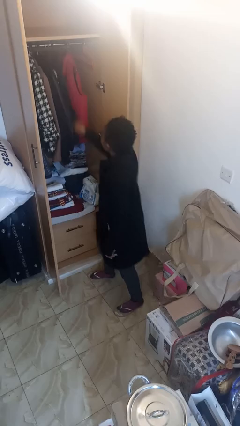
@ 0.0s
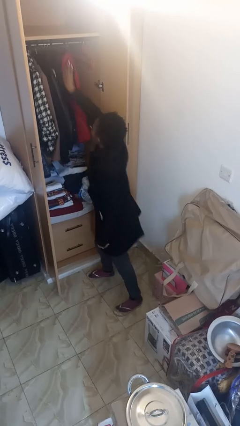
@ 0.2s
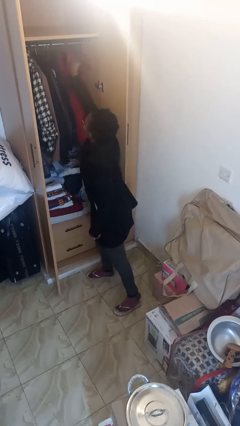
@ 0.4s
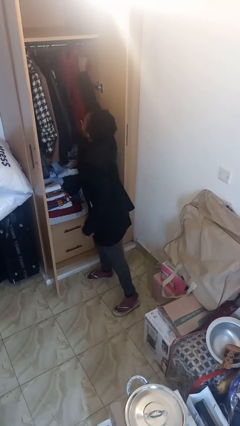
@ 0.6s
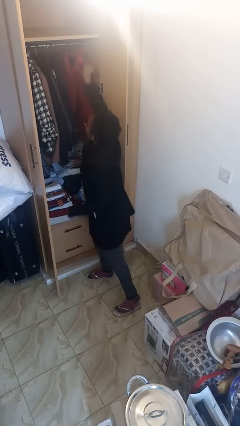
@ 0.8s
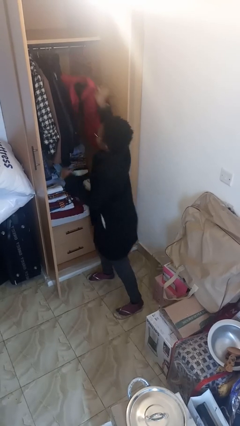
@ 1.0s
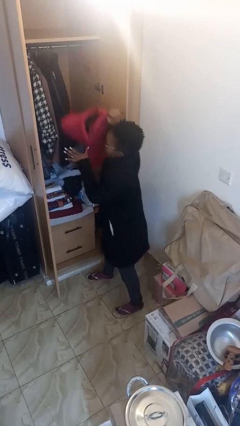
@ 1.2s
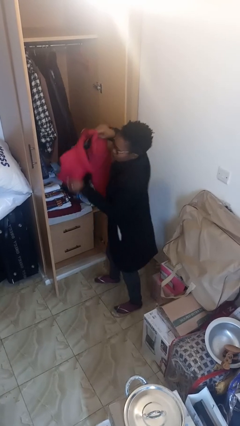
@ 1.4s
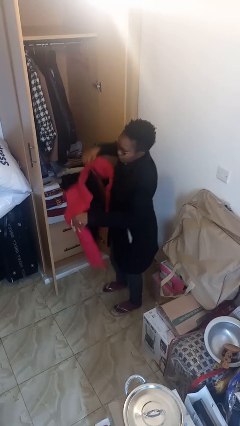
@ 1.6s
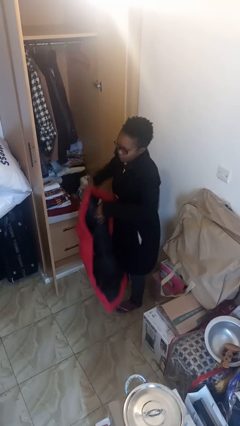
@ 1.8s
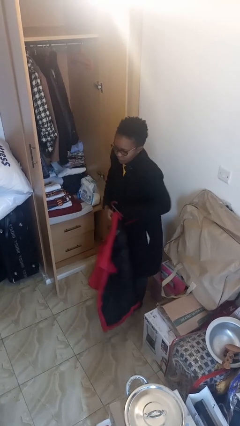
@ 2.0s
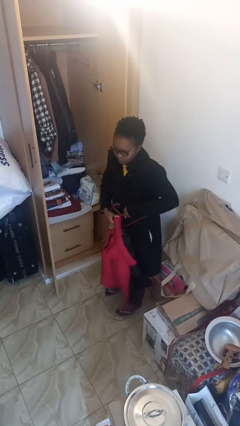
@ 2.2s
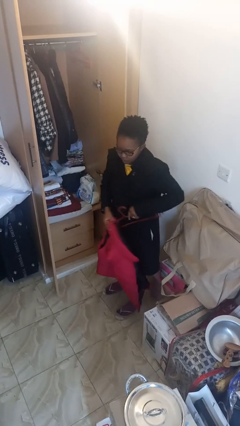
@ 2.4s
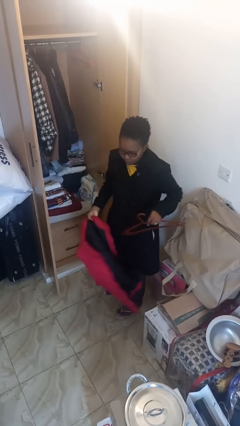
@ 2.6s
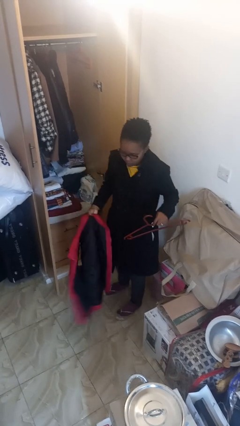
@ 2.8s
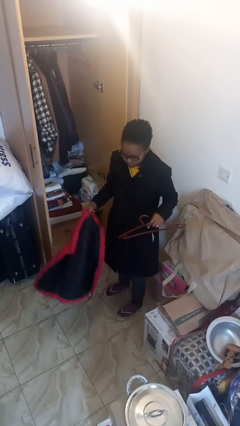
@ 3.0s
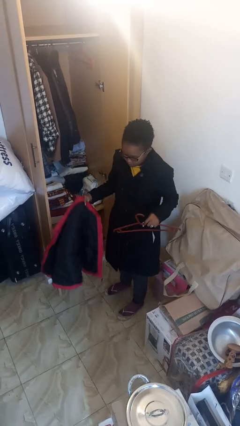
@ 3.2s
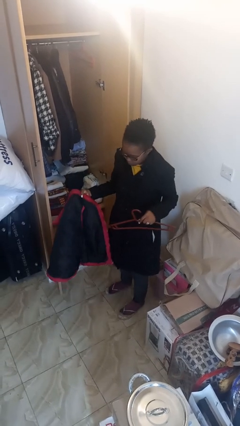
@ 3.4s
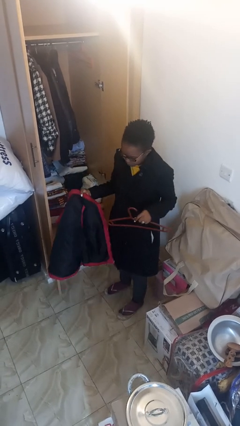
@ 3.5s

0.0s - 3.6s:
person takes clothes from closet

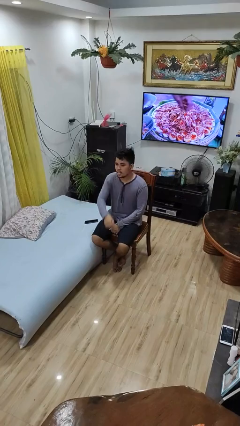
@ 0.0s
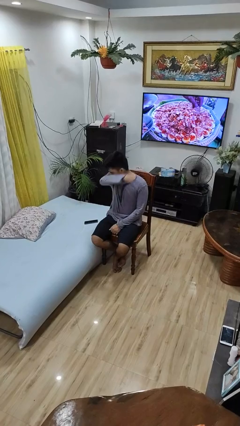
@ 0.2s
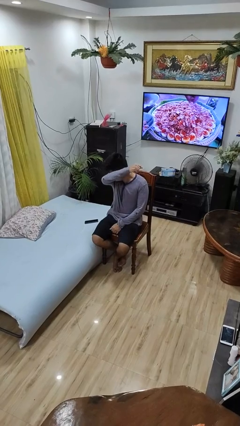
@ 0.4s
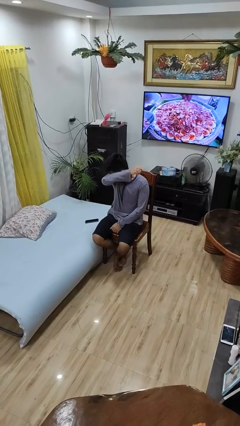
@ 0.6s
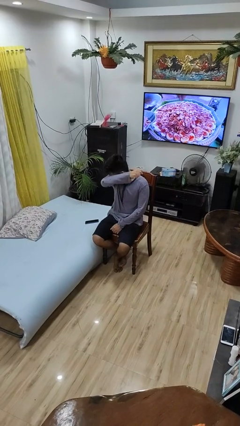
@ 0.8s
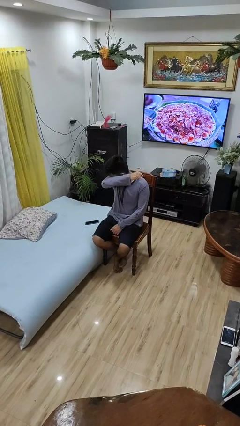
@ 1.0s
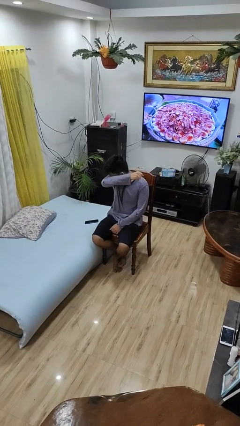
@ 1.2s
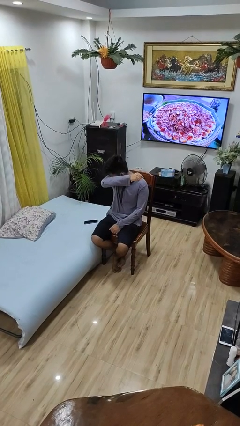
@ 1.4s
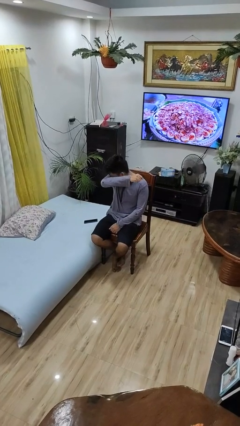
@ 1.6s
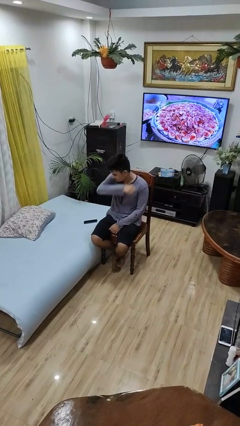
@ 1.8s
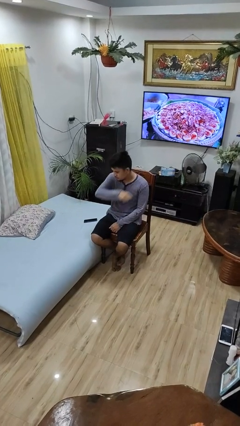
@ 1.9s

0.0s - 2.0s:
person sneezes into arm

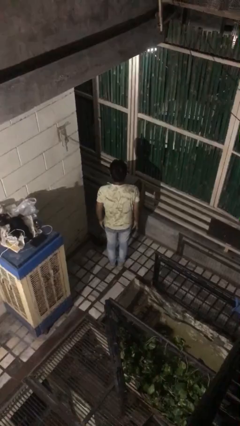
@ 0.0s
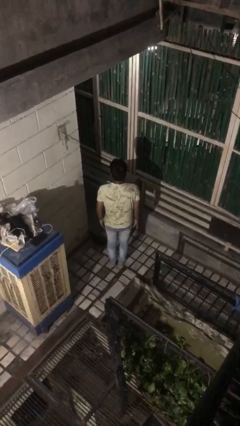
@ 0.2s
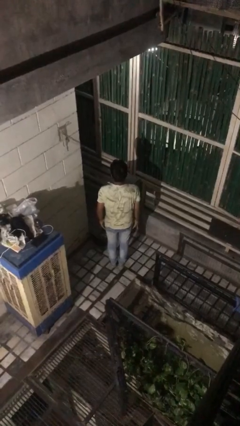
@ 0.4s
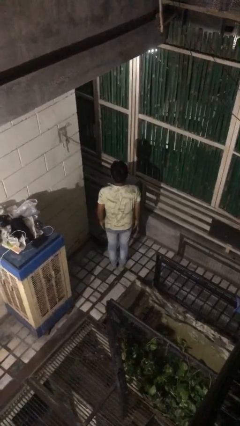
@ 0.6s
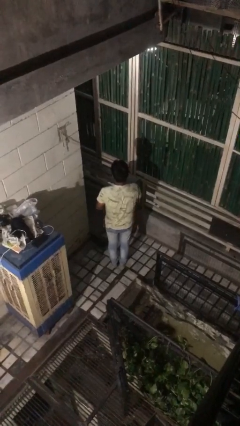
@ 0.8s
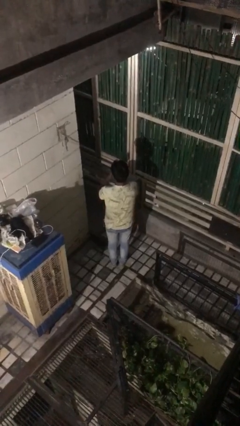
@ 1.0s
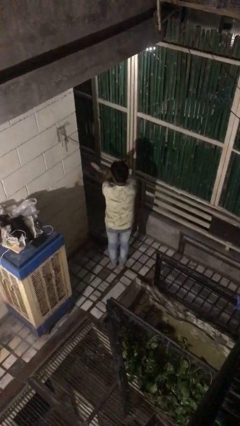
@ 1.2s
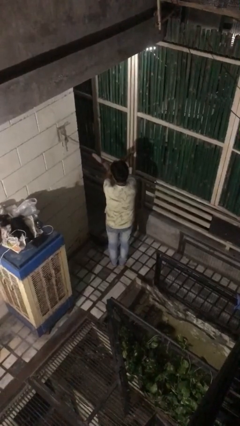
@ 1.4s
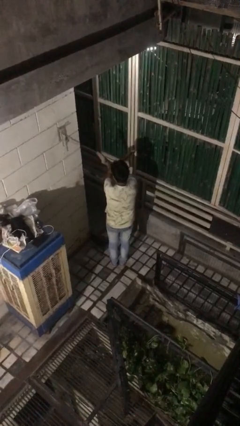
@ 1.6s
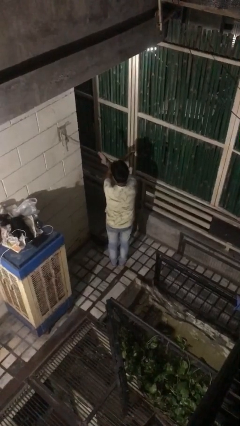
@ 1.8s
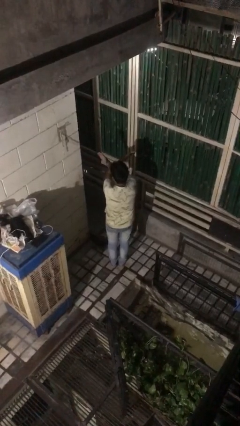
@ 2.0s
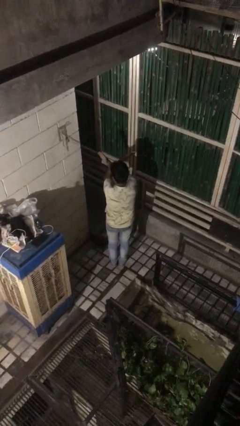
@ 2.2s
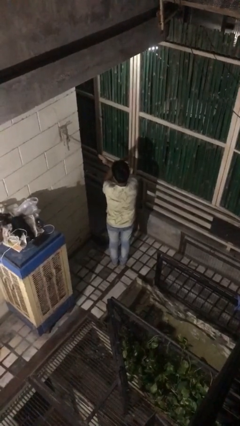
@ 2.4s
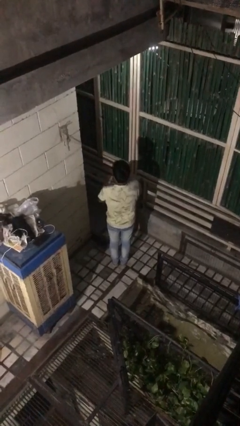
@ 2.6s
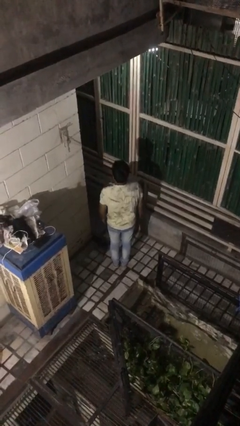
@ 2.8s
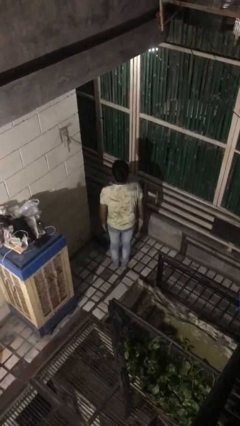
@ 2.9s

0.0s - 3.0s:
person gestures arms x

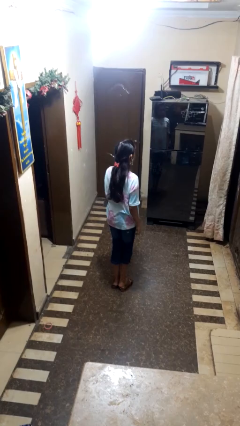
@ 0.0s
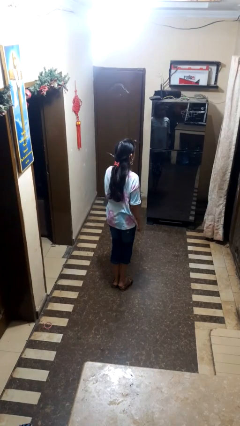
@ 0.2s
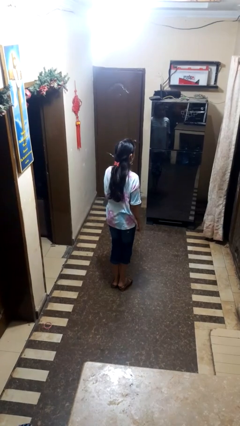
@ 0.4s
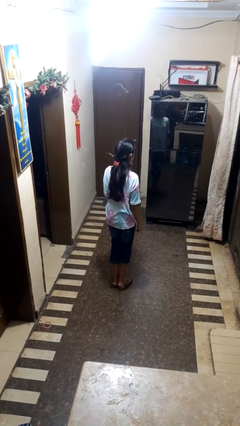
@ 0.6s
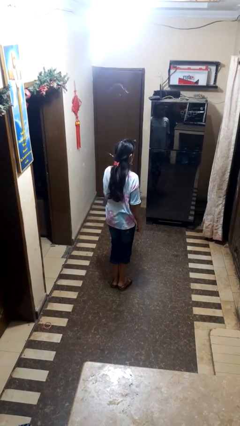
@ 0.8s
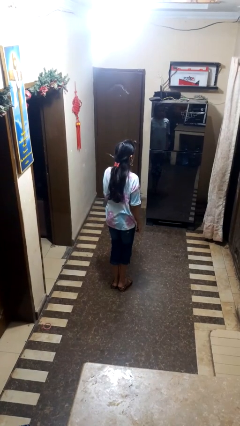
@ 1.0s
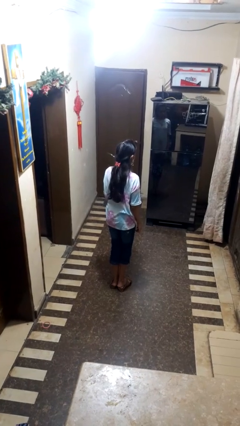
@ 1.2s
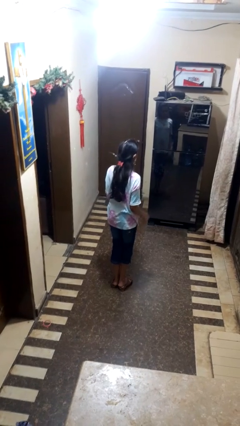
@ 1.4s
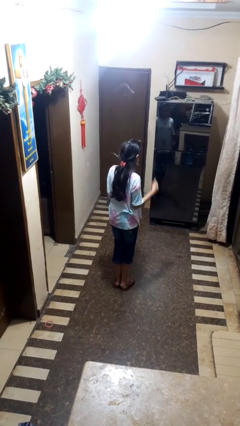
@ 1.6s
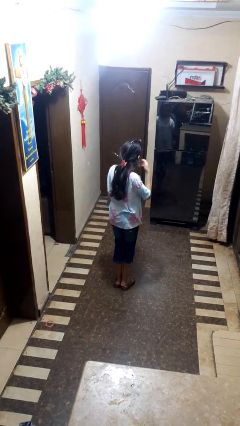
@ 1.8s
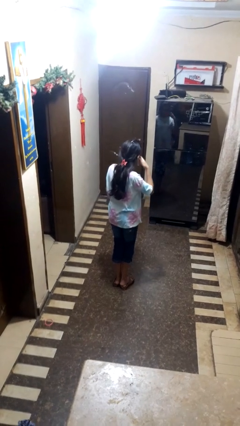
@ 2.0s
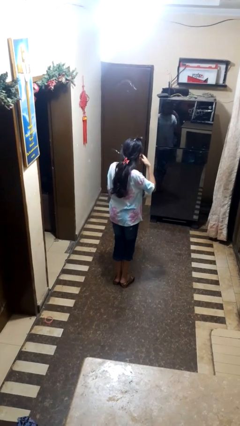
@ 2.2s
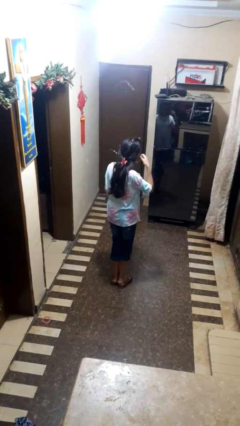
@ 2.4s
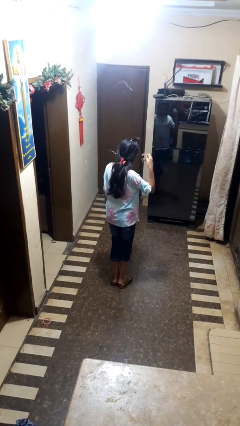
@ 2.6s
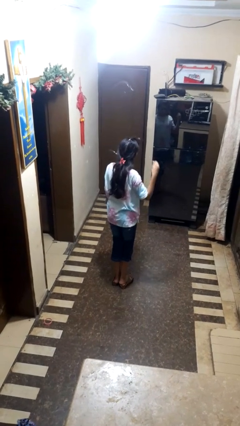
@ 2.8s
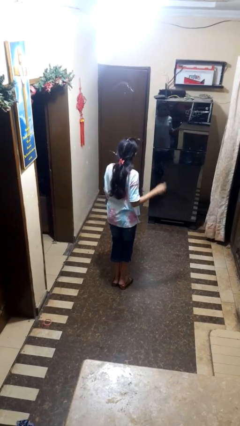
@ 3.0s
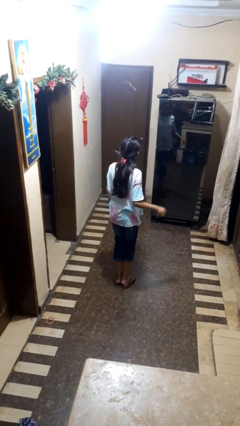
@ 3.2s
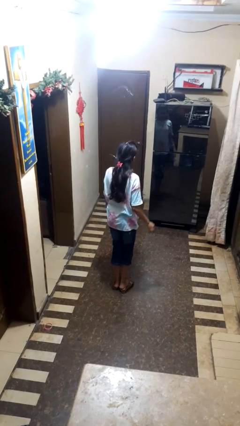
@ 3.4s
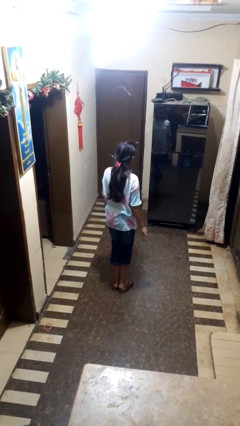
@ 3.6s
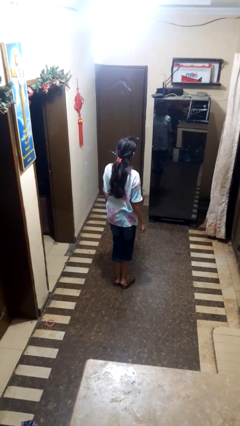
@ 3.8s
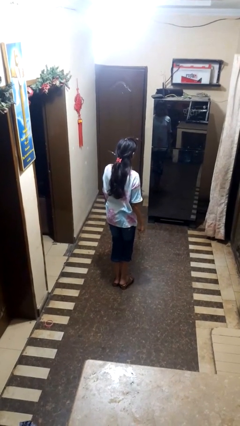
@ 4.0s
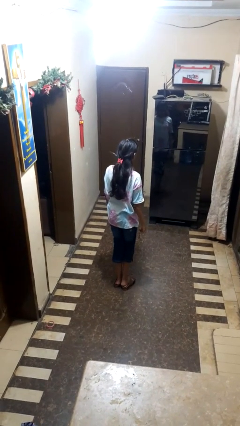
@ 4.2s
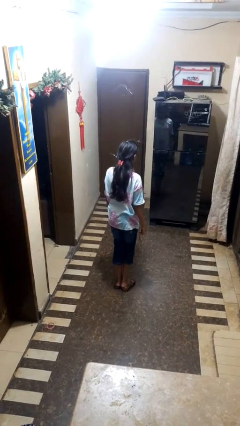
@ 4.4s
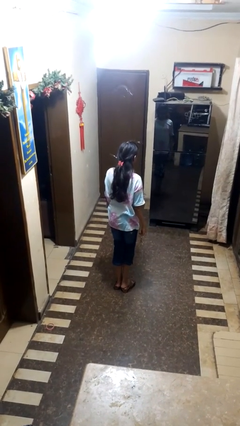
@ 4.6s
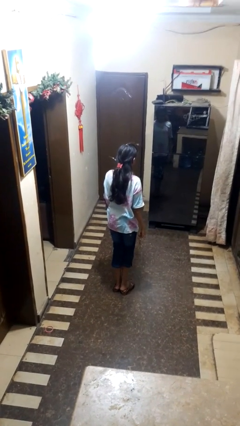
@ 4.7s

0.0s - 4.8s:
person takes off earrings

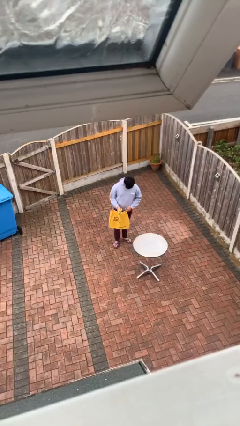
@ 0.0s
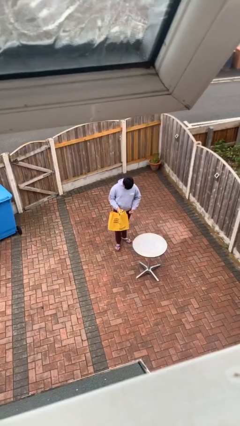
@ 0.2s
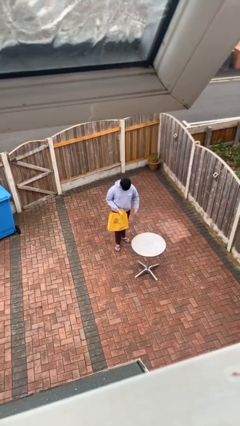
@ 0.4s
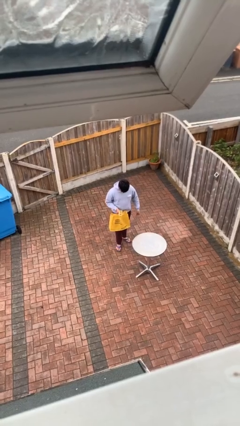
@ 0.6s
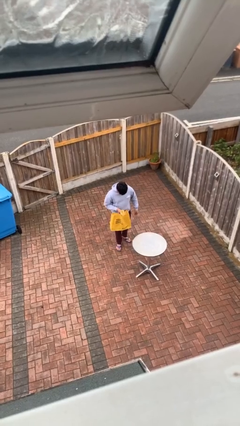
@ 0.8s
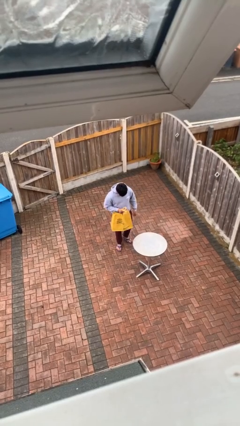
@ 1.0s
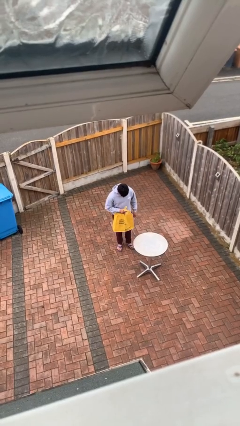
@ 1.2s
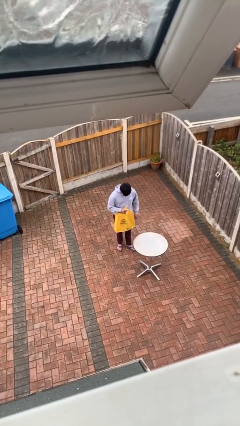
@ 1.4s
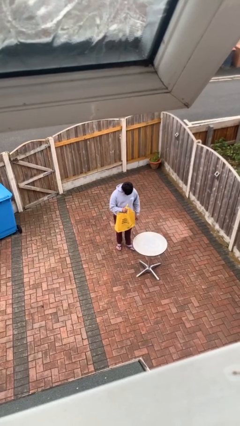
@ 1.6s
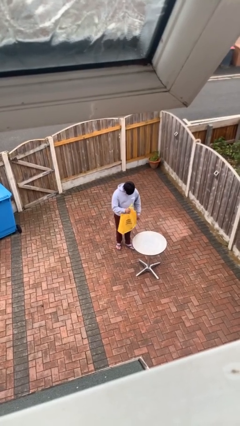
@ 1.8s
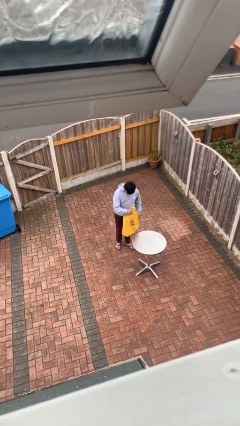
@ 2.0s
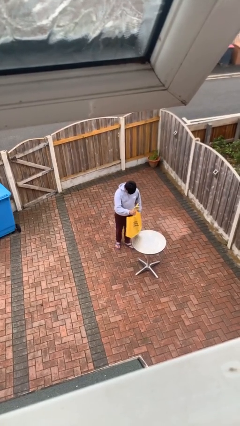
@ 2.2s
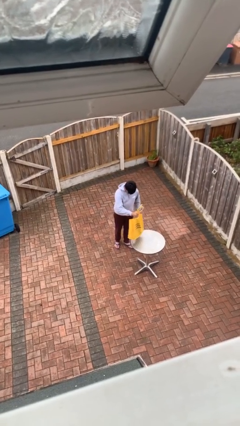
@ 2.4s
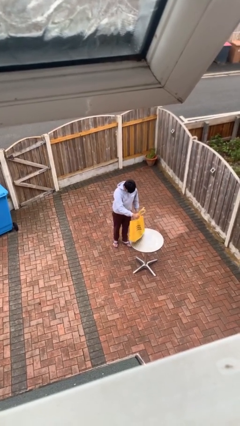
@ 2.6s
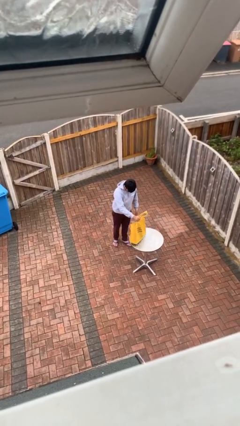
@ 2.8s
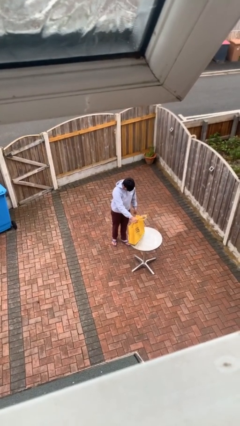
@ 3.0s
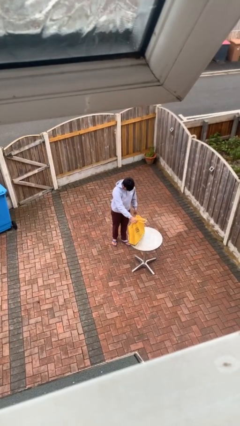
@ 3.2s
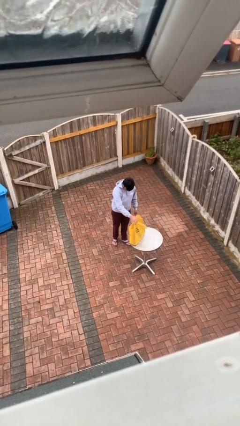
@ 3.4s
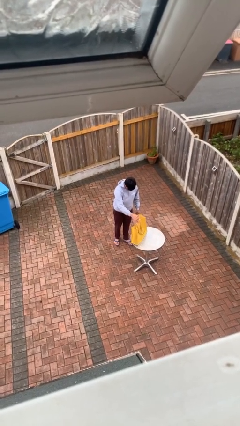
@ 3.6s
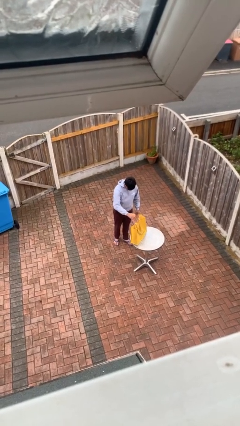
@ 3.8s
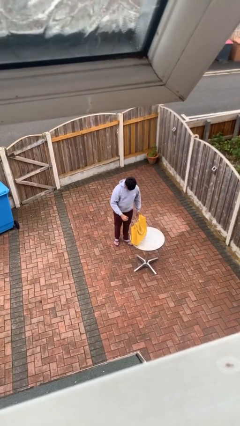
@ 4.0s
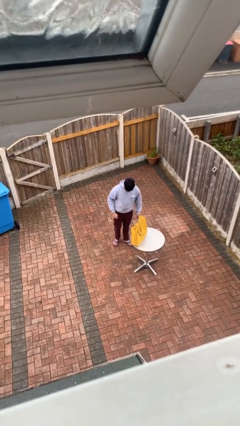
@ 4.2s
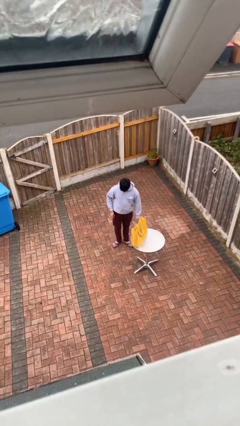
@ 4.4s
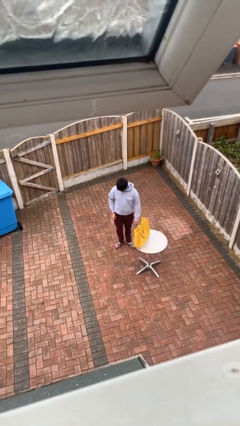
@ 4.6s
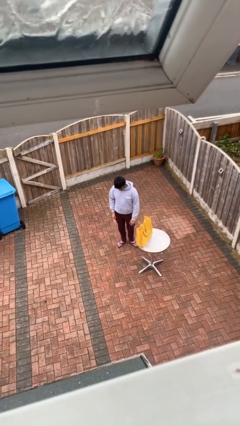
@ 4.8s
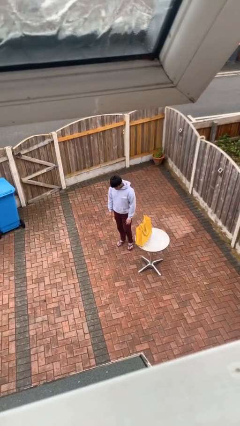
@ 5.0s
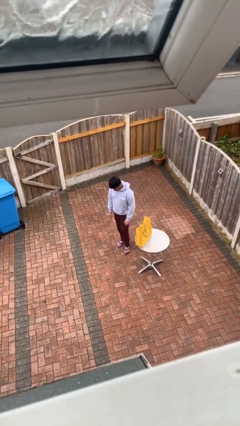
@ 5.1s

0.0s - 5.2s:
person puts down object on table
